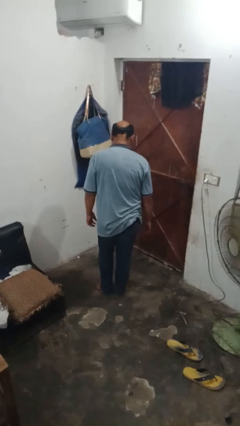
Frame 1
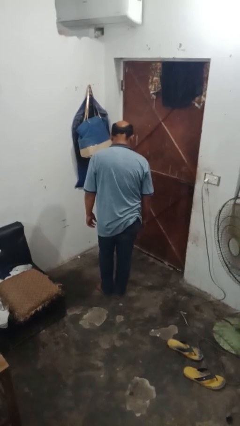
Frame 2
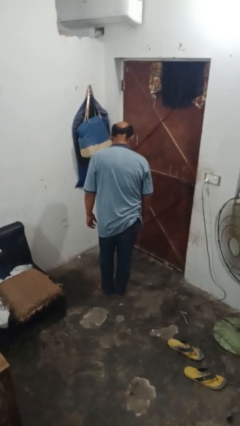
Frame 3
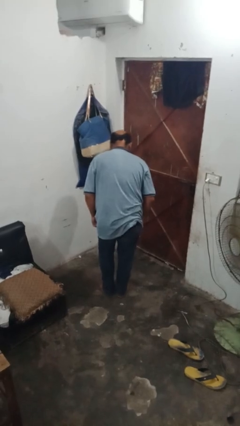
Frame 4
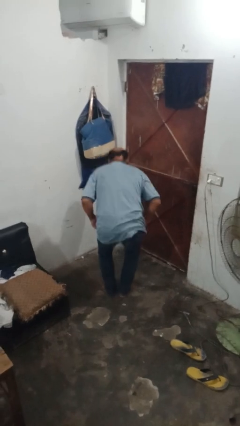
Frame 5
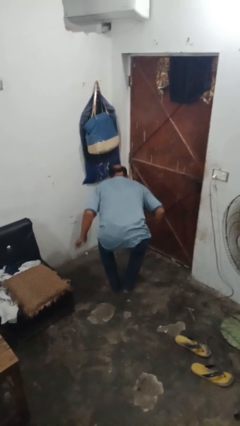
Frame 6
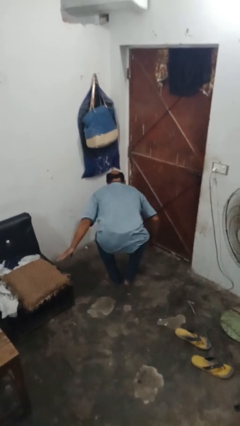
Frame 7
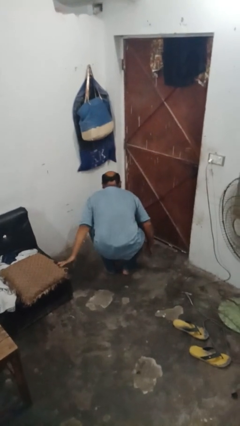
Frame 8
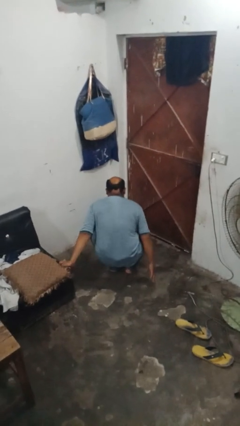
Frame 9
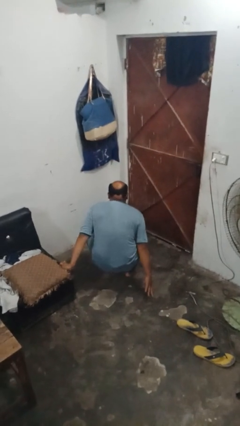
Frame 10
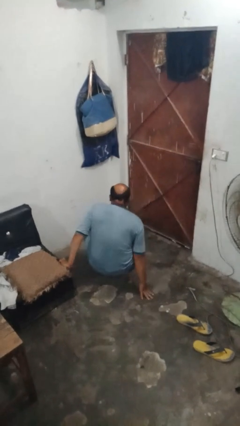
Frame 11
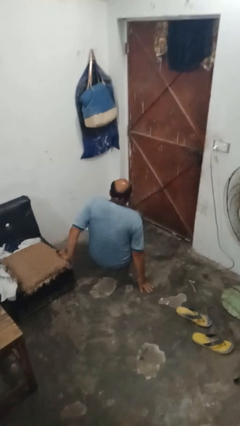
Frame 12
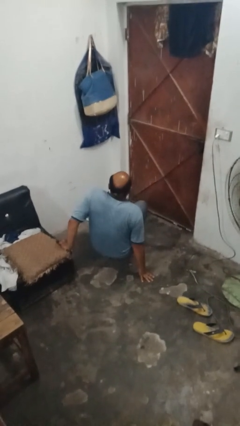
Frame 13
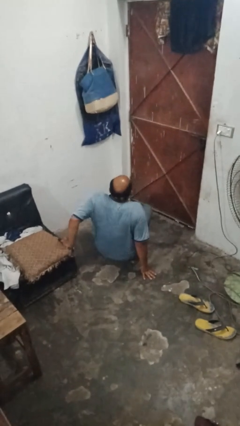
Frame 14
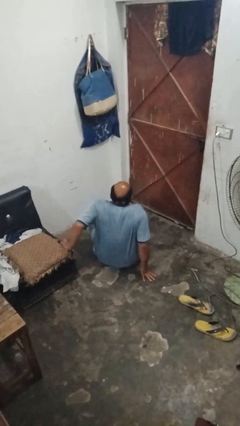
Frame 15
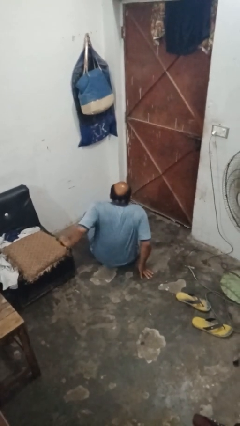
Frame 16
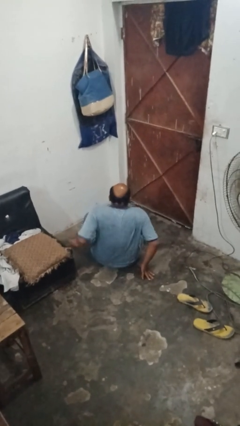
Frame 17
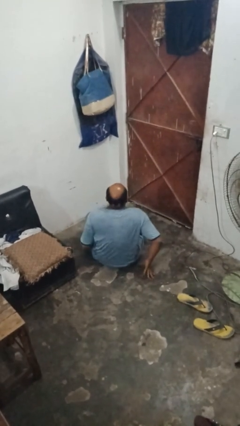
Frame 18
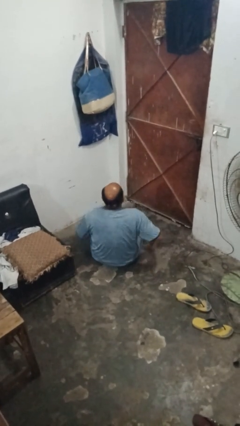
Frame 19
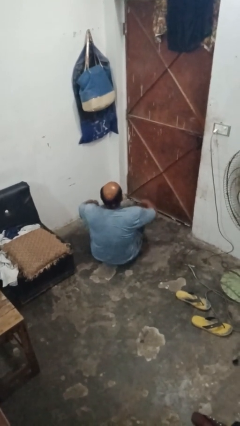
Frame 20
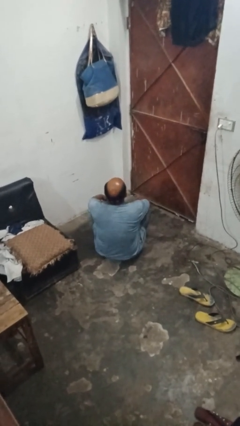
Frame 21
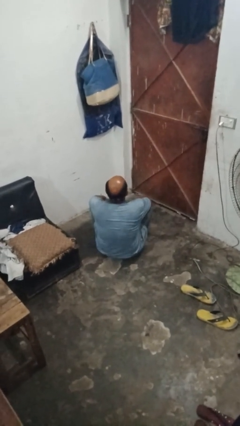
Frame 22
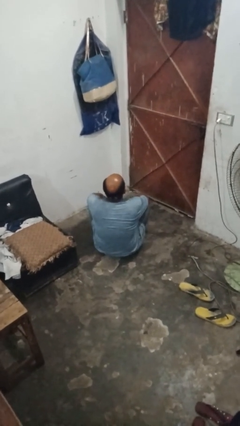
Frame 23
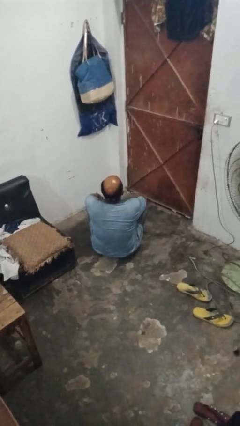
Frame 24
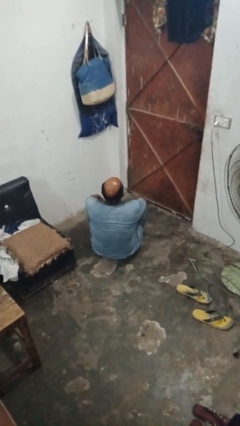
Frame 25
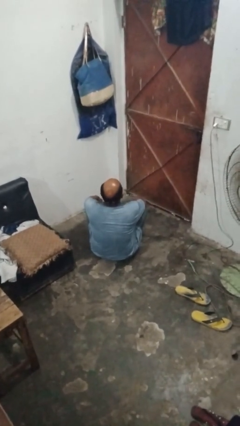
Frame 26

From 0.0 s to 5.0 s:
person sits crisscross

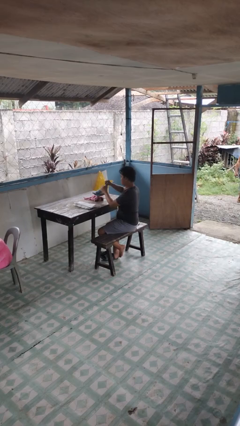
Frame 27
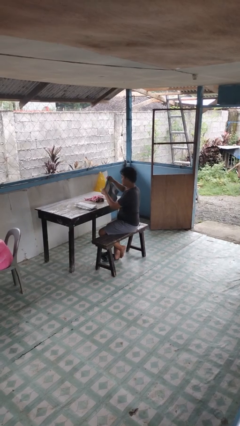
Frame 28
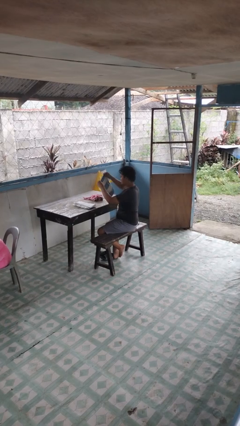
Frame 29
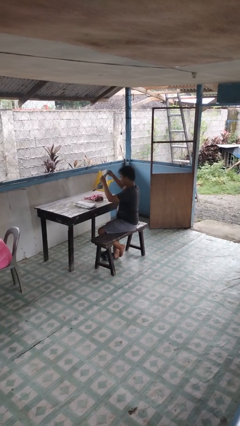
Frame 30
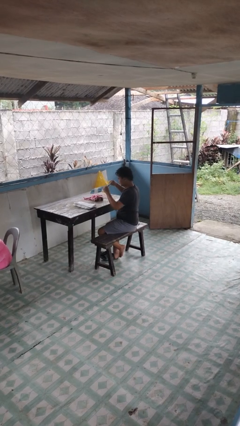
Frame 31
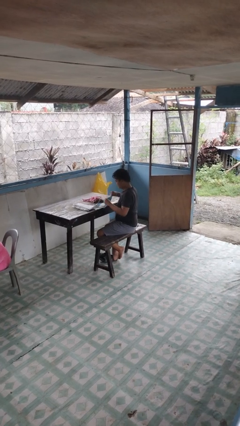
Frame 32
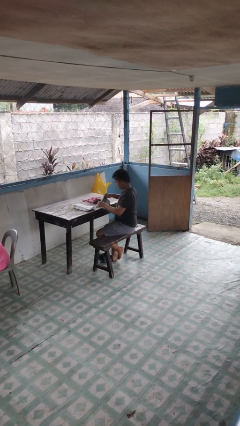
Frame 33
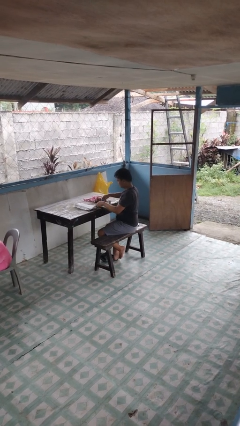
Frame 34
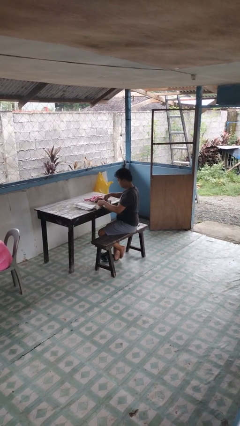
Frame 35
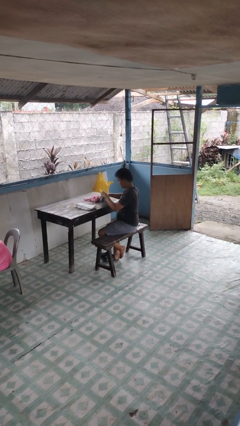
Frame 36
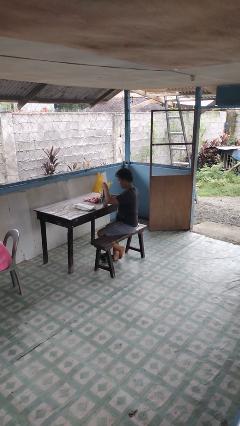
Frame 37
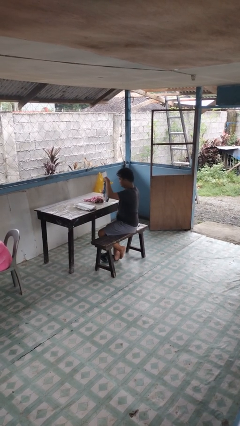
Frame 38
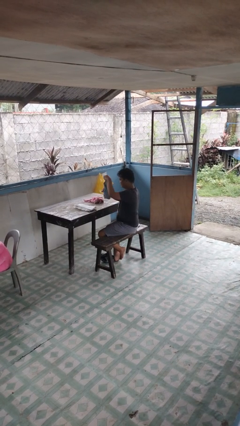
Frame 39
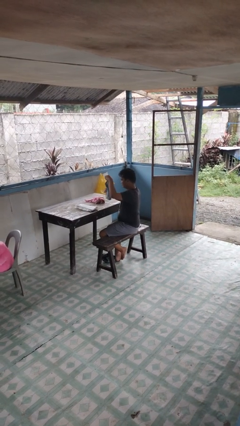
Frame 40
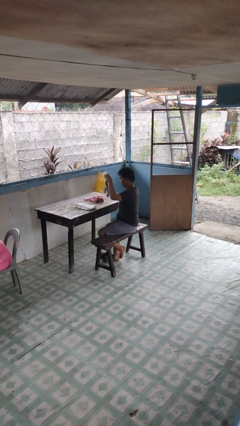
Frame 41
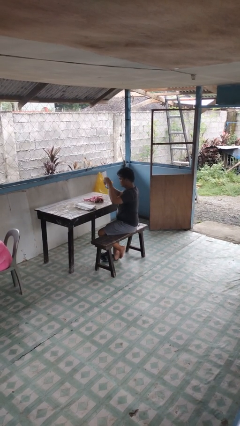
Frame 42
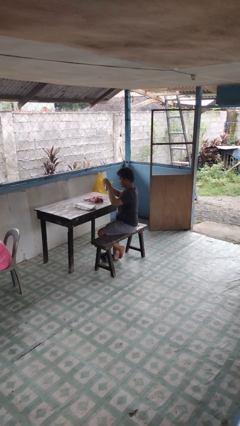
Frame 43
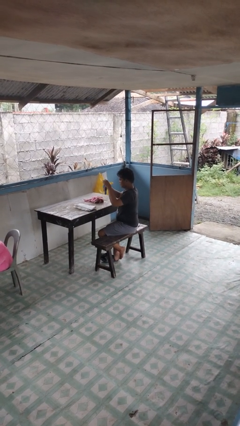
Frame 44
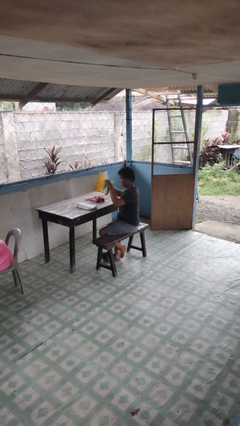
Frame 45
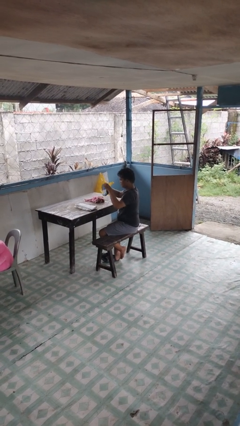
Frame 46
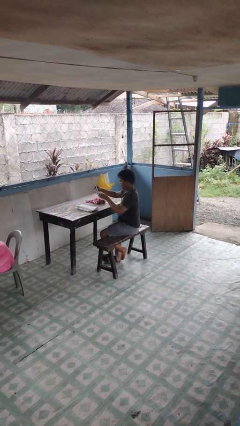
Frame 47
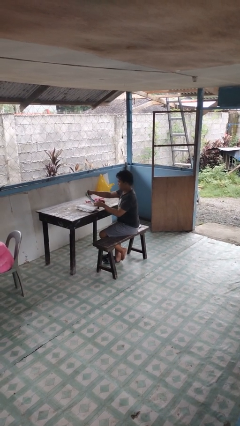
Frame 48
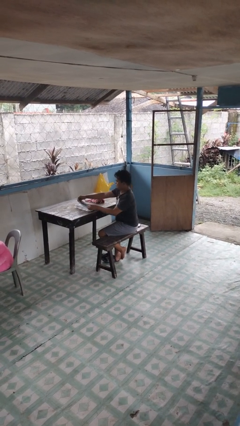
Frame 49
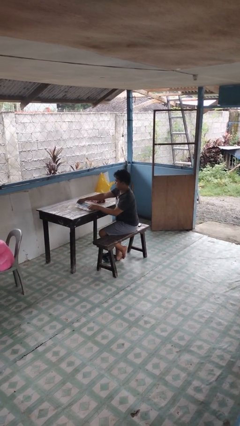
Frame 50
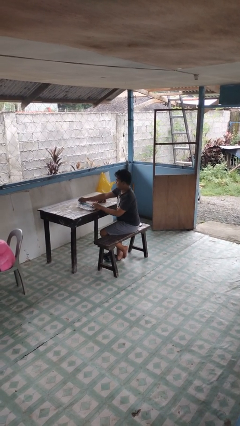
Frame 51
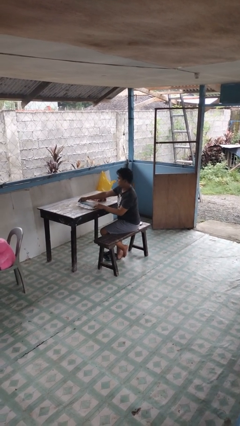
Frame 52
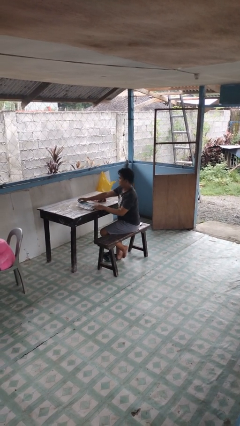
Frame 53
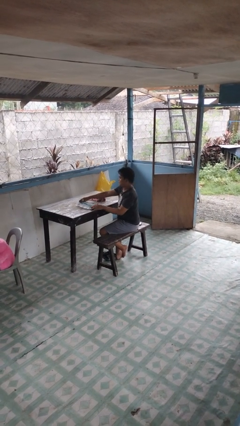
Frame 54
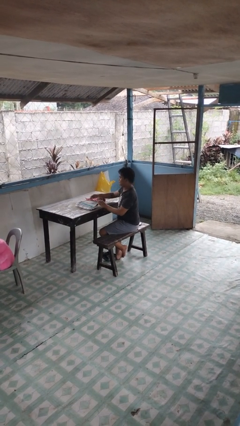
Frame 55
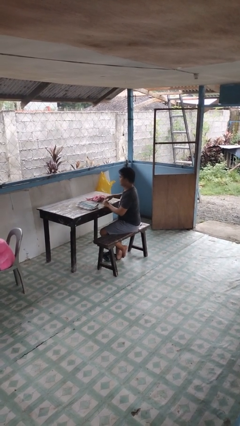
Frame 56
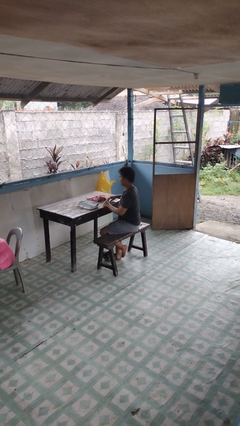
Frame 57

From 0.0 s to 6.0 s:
person folds towel

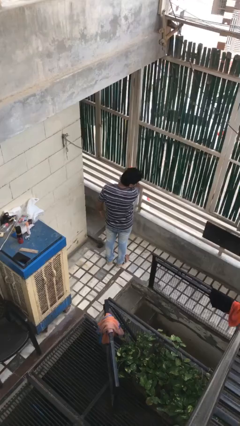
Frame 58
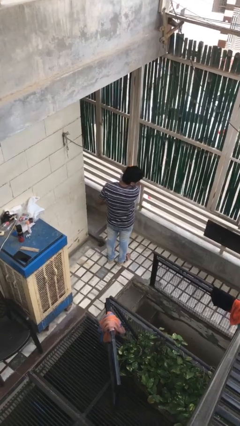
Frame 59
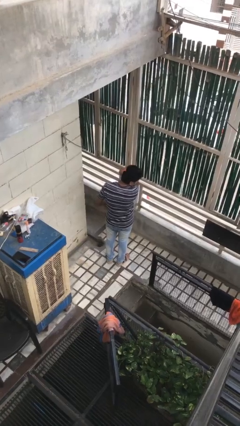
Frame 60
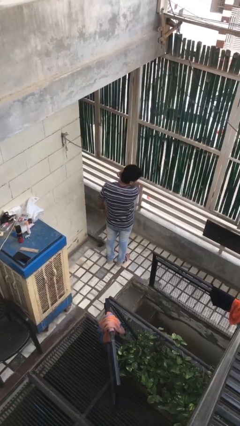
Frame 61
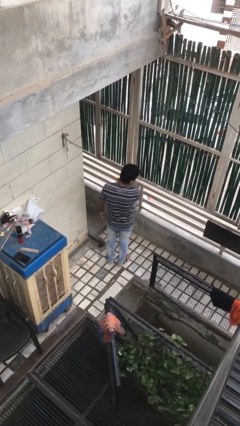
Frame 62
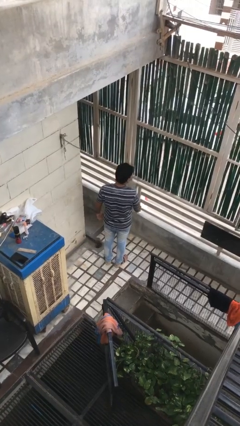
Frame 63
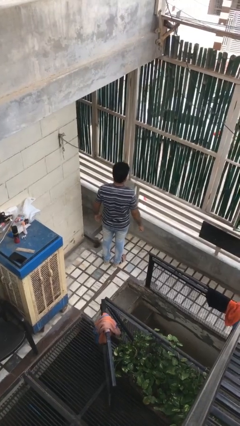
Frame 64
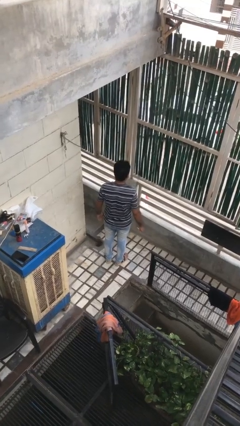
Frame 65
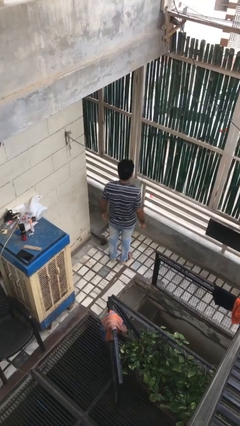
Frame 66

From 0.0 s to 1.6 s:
person brushes hair

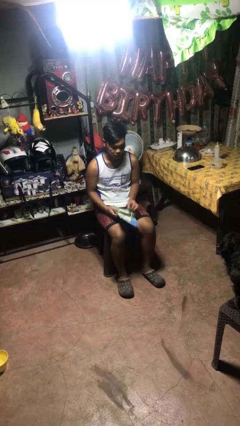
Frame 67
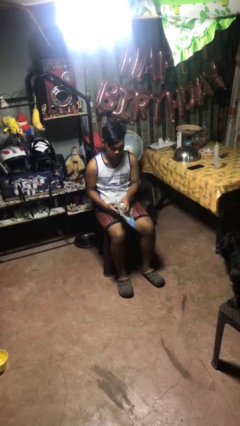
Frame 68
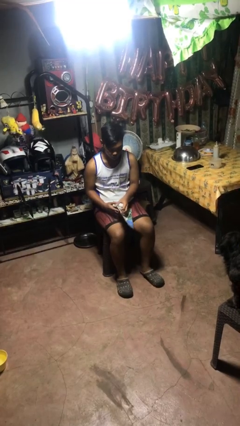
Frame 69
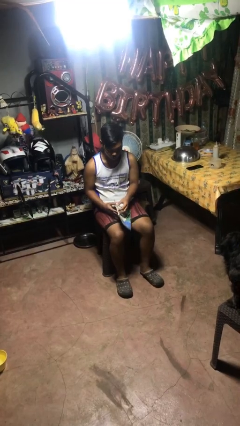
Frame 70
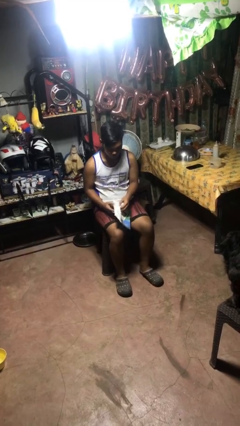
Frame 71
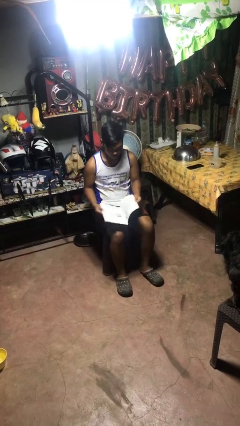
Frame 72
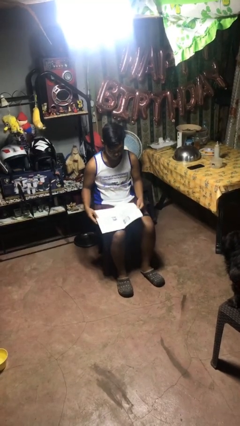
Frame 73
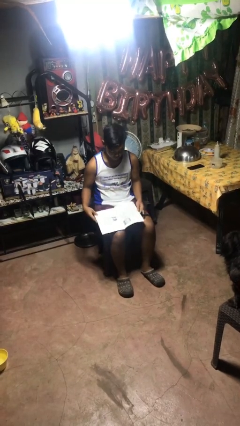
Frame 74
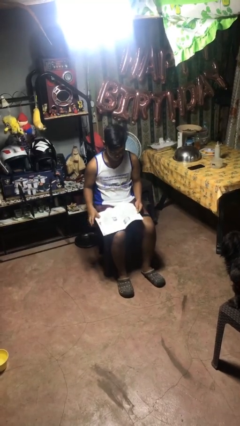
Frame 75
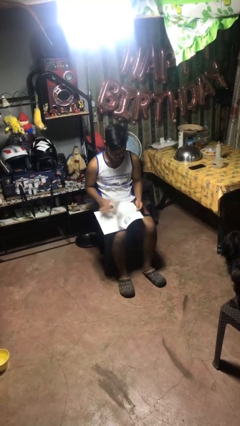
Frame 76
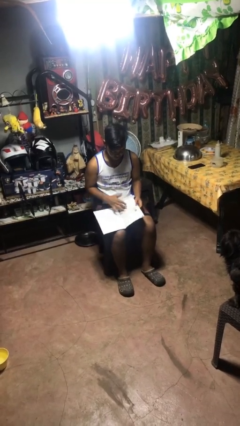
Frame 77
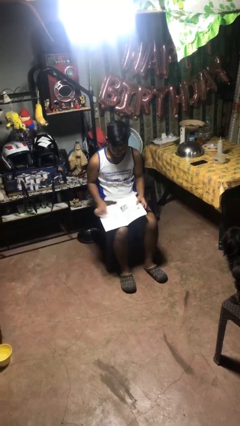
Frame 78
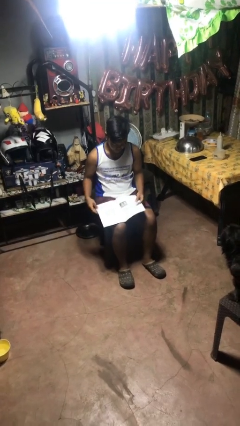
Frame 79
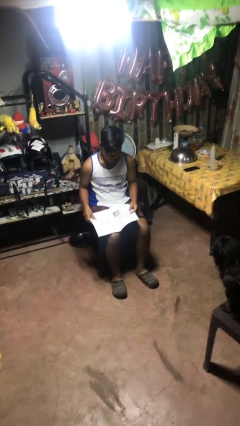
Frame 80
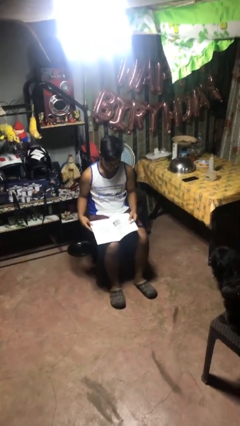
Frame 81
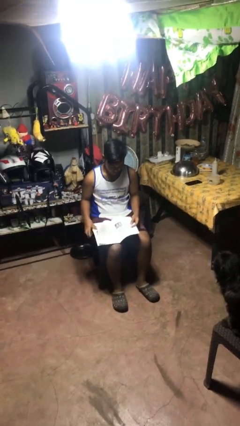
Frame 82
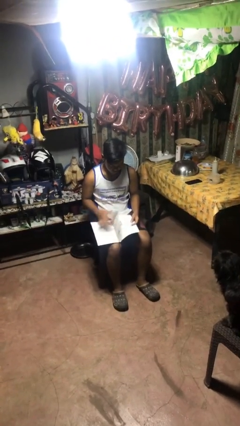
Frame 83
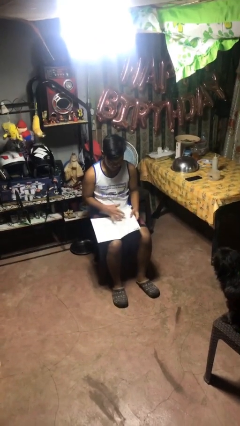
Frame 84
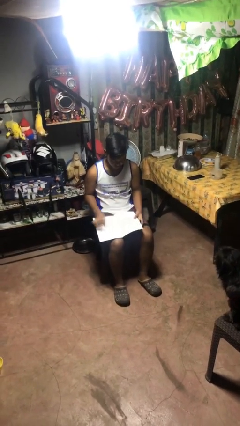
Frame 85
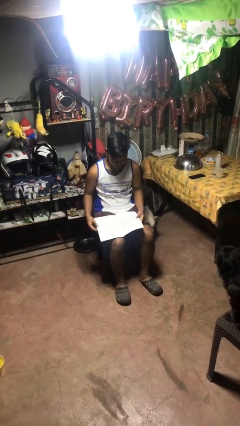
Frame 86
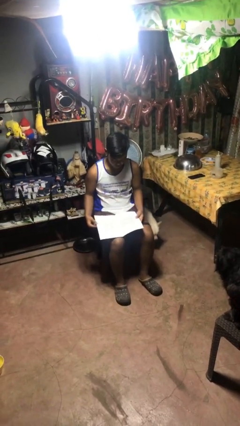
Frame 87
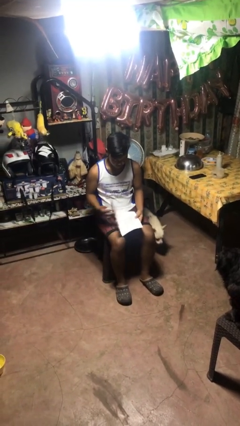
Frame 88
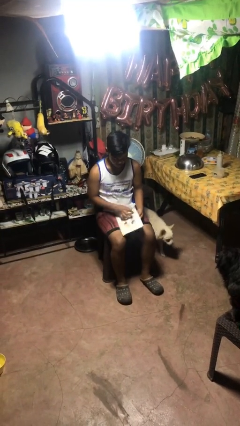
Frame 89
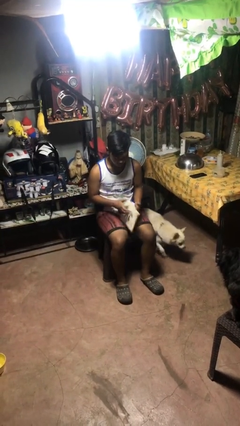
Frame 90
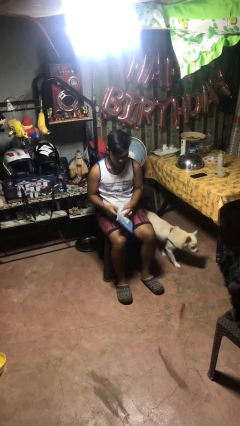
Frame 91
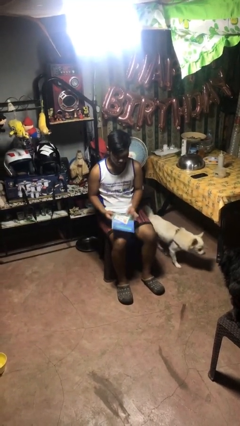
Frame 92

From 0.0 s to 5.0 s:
person reads magazine

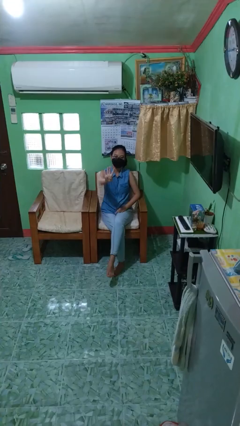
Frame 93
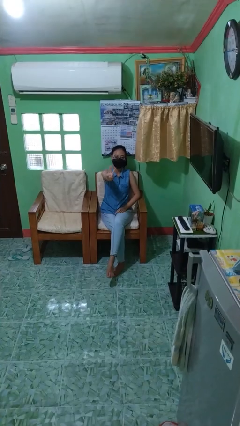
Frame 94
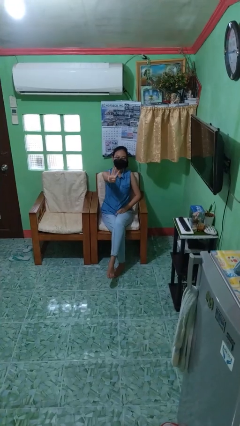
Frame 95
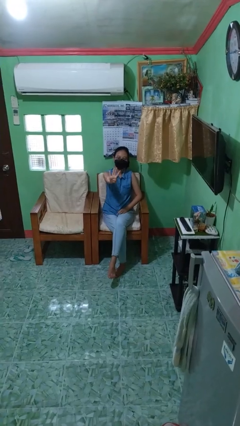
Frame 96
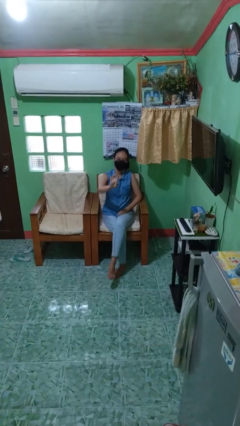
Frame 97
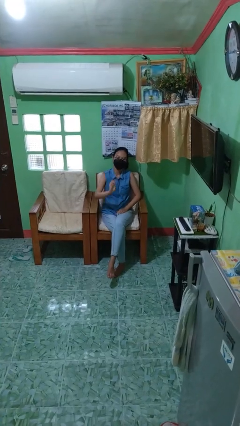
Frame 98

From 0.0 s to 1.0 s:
person gestures number four
